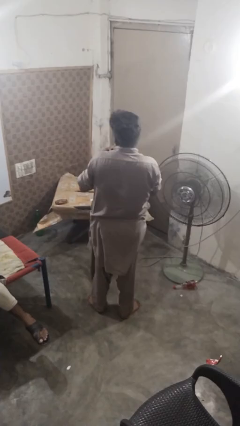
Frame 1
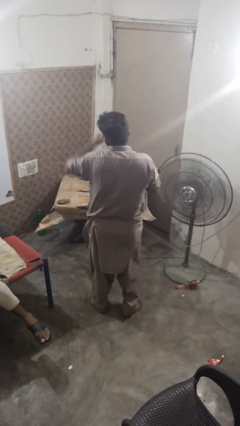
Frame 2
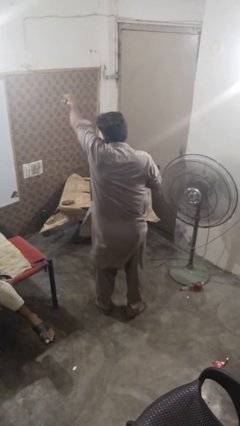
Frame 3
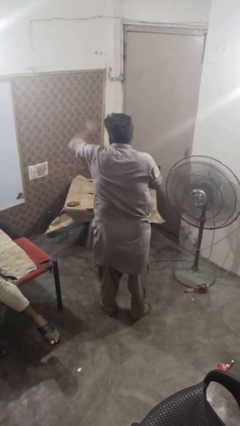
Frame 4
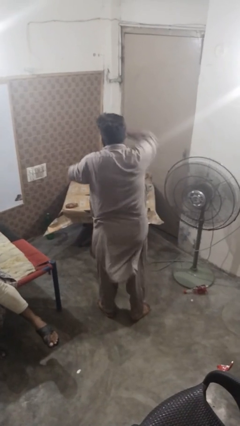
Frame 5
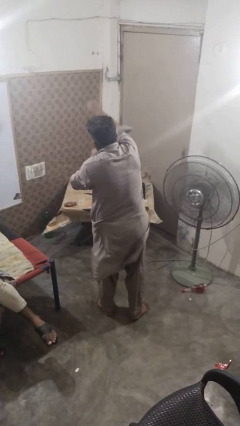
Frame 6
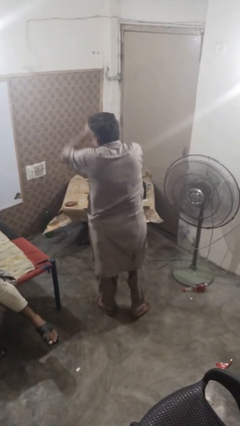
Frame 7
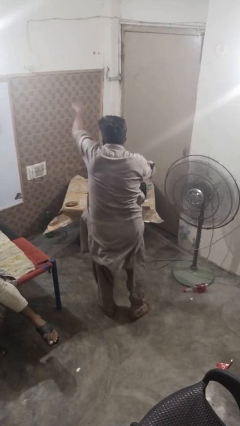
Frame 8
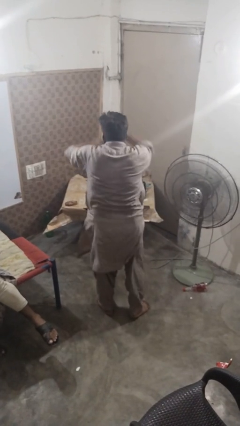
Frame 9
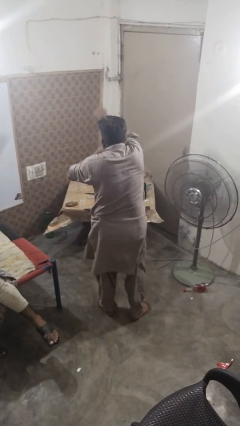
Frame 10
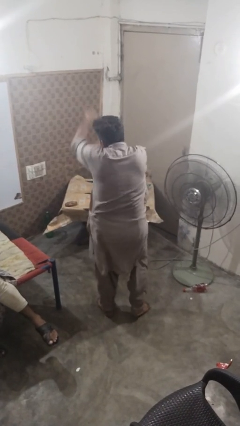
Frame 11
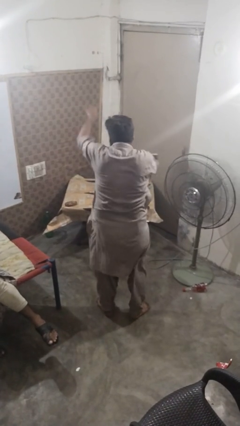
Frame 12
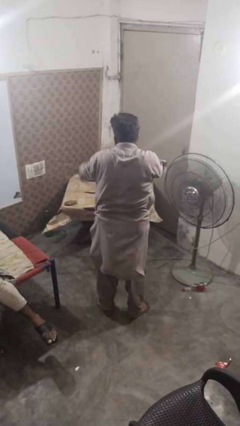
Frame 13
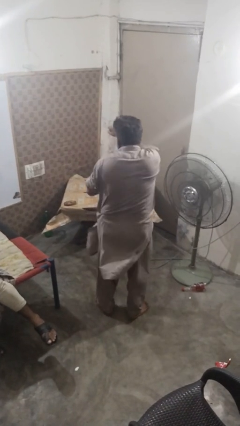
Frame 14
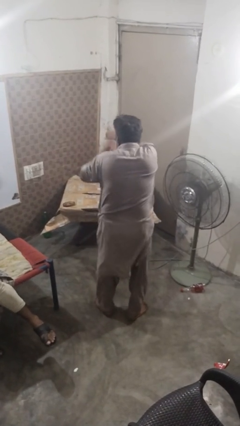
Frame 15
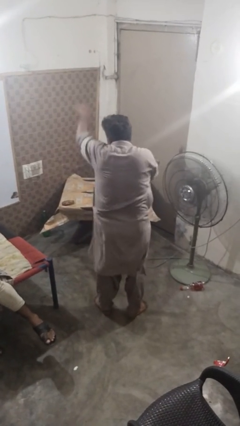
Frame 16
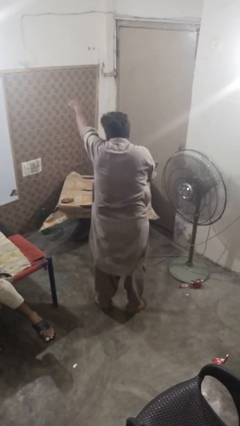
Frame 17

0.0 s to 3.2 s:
person punches

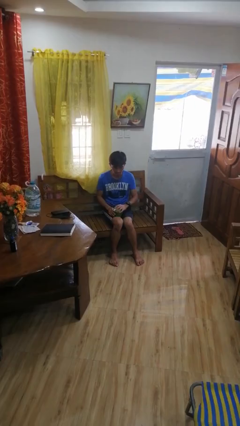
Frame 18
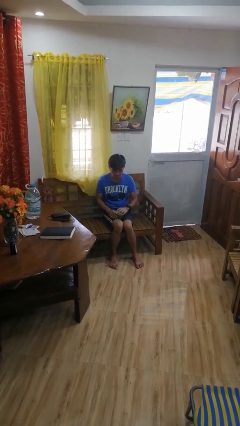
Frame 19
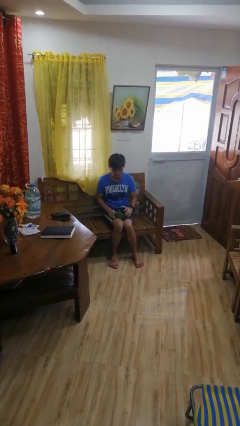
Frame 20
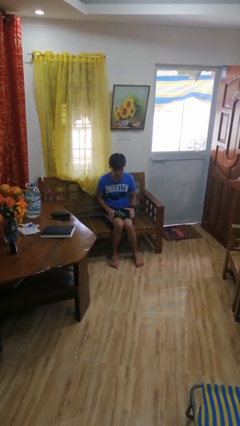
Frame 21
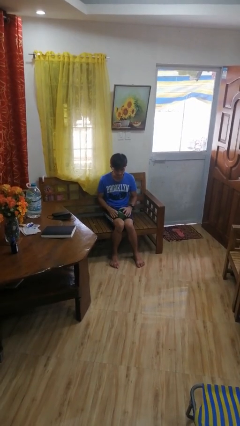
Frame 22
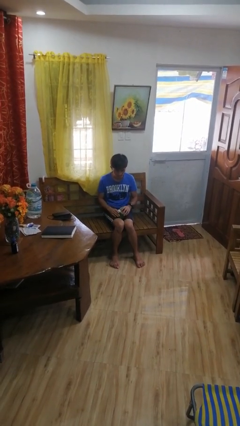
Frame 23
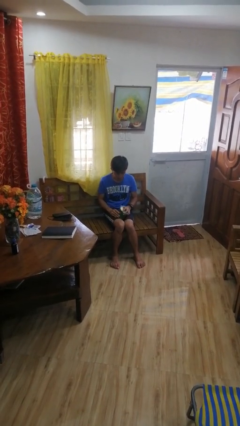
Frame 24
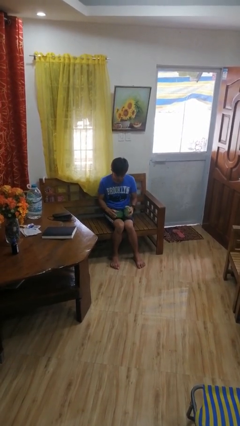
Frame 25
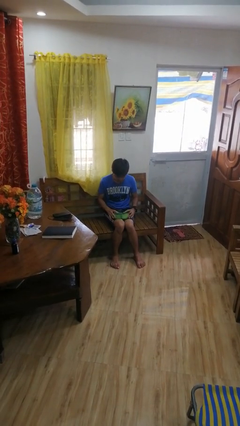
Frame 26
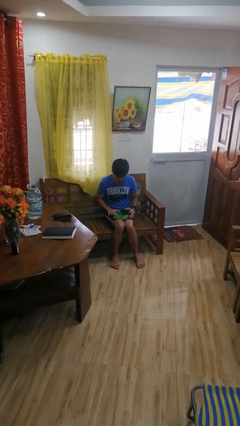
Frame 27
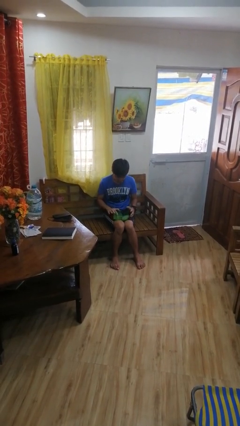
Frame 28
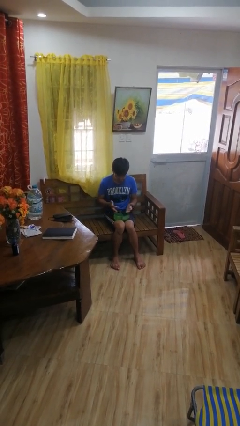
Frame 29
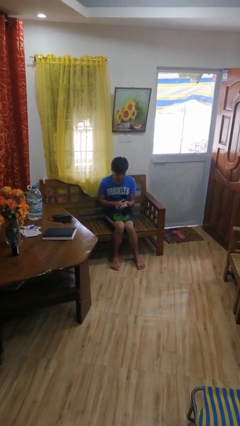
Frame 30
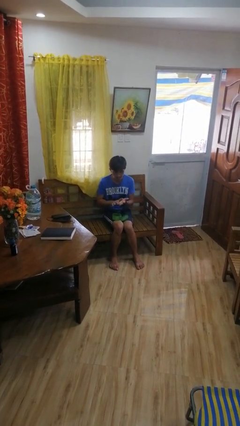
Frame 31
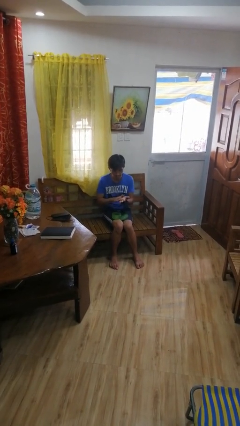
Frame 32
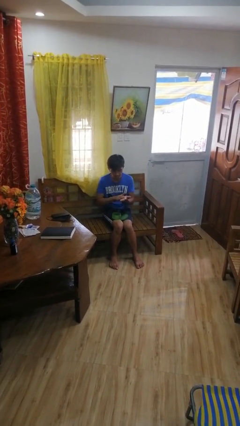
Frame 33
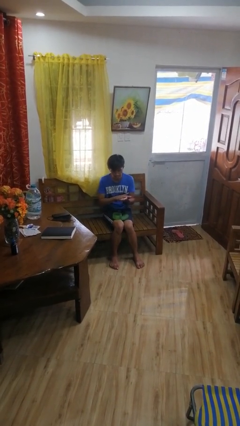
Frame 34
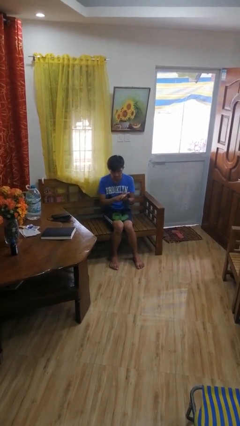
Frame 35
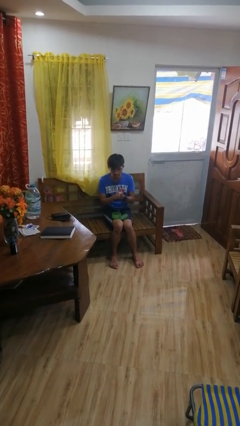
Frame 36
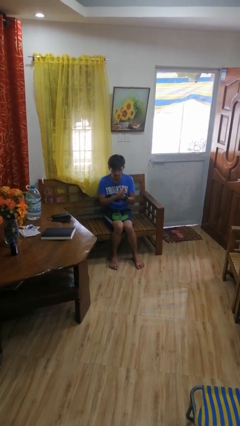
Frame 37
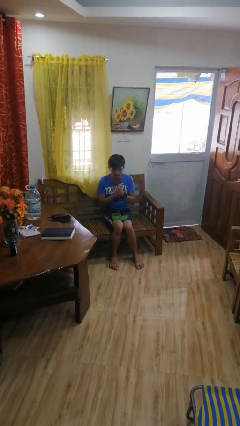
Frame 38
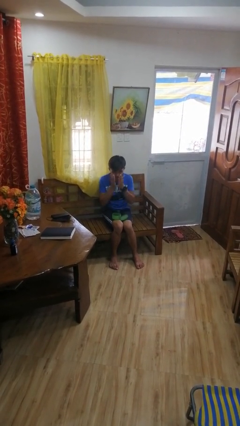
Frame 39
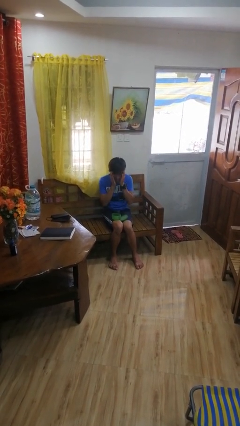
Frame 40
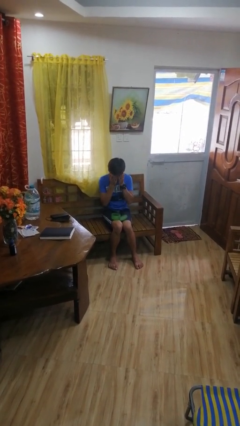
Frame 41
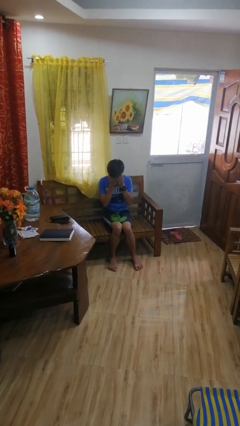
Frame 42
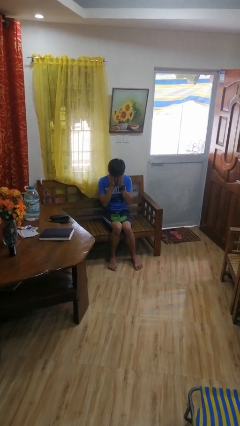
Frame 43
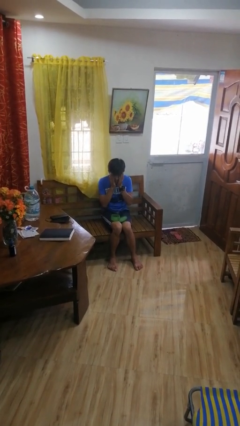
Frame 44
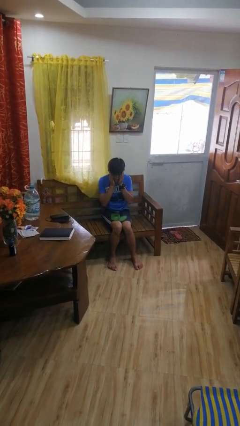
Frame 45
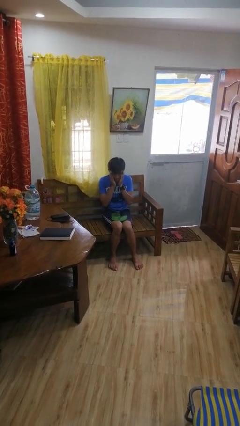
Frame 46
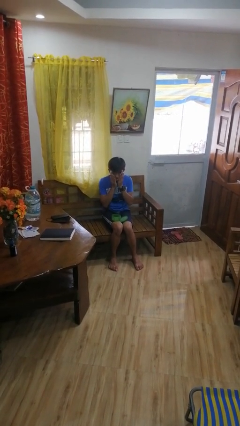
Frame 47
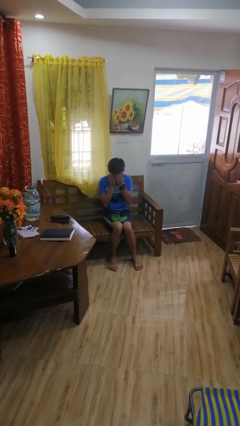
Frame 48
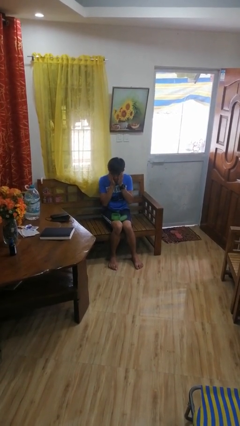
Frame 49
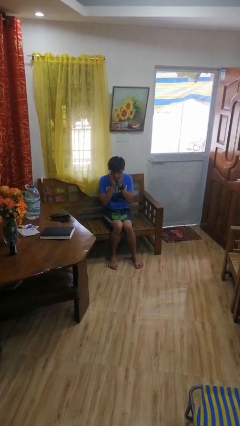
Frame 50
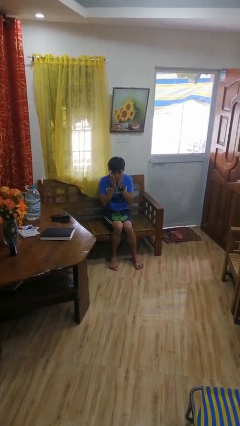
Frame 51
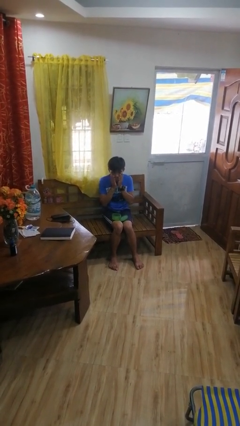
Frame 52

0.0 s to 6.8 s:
person applies facial moisturizer

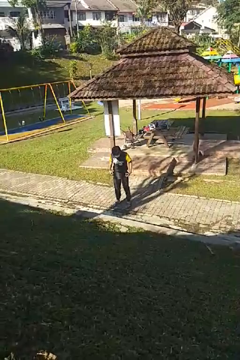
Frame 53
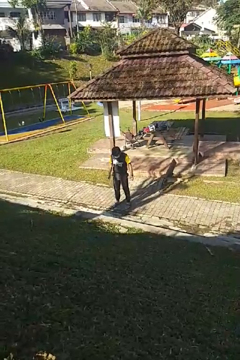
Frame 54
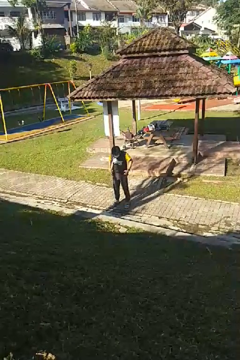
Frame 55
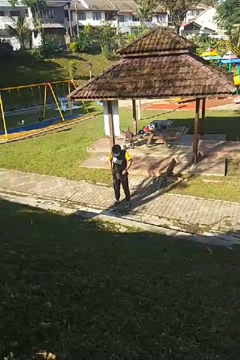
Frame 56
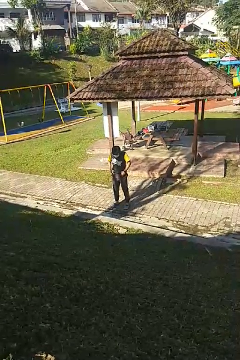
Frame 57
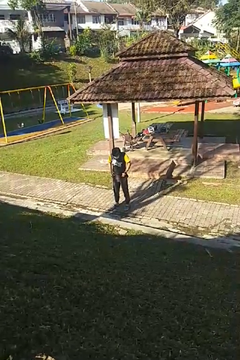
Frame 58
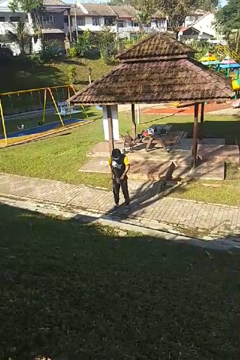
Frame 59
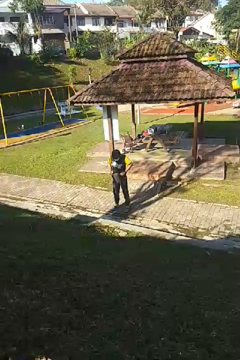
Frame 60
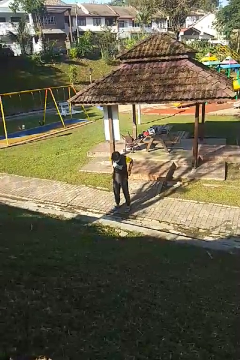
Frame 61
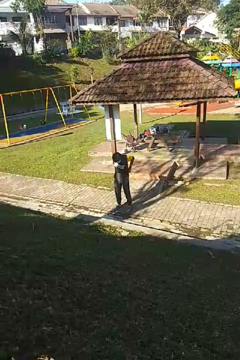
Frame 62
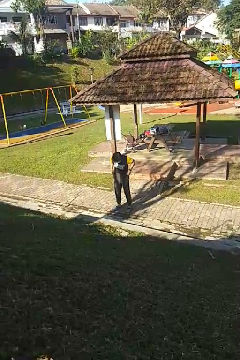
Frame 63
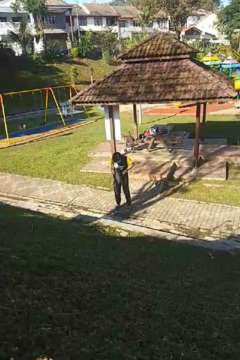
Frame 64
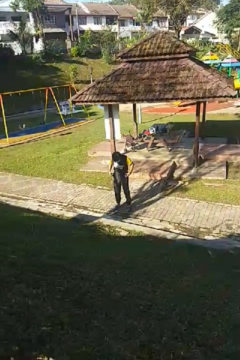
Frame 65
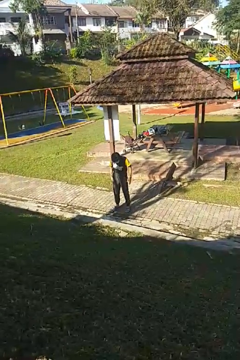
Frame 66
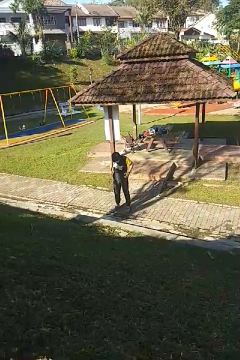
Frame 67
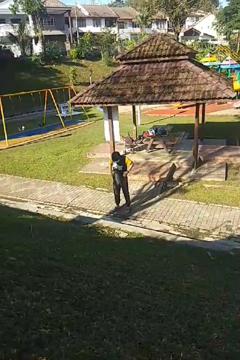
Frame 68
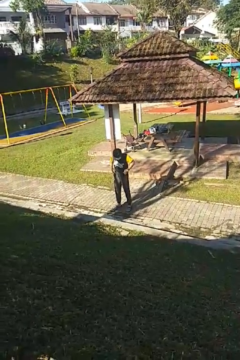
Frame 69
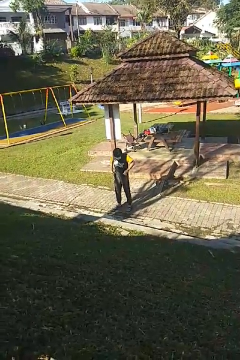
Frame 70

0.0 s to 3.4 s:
person hikes up pants

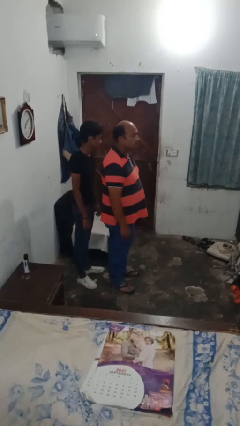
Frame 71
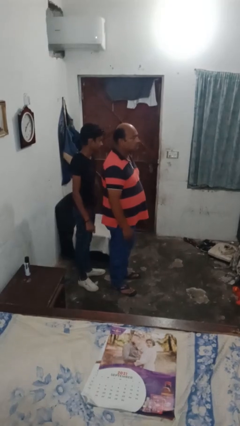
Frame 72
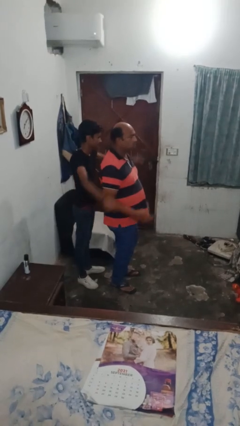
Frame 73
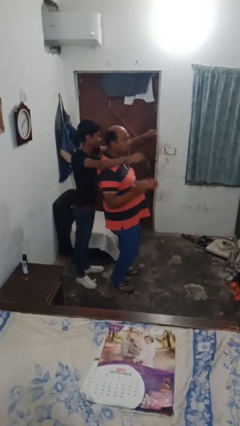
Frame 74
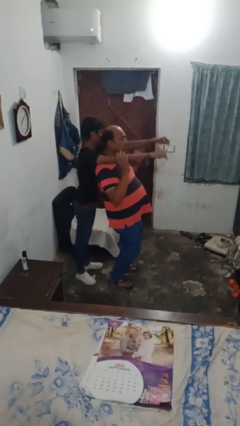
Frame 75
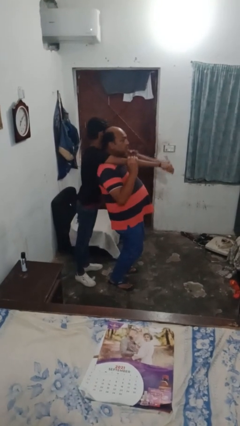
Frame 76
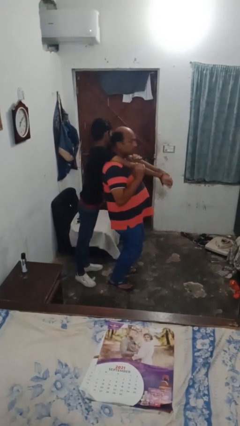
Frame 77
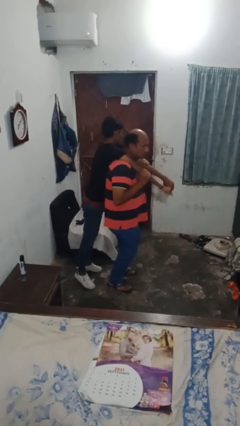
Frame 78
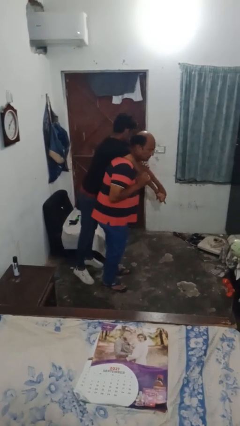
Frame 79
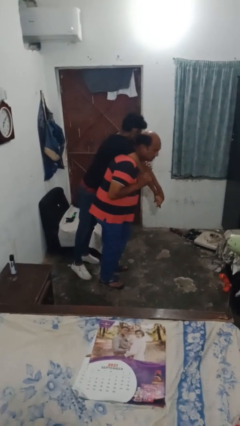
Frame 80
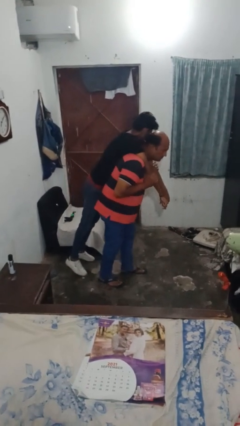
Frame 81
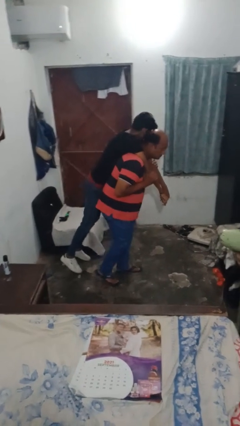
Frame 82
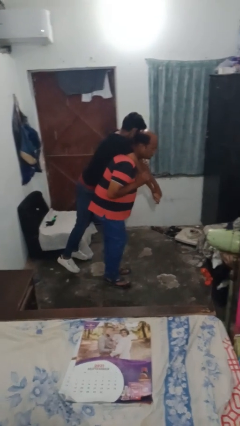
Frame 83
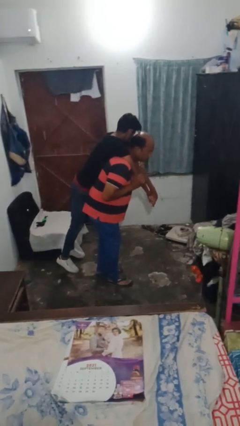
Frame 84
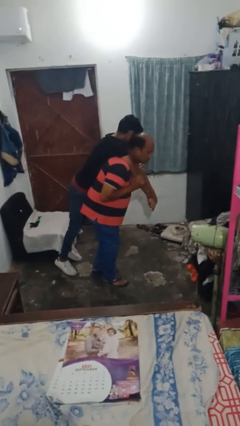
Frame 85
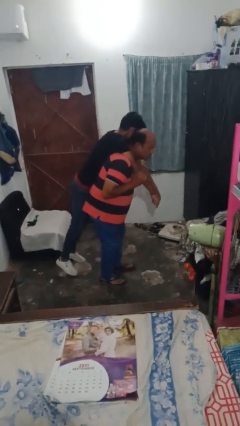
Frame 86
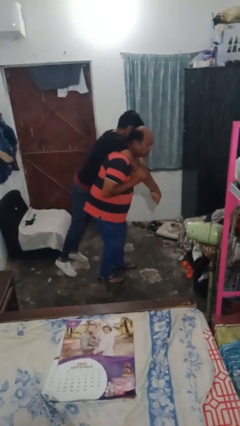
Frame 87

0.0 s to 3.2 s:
person carries person on back

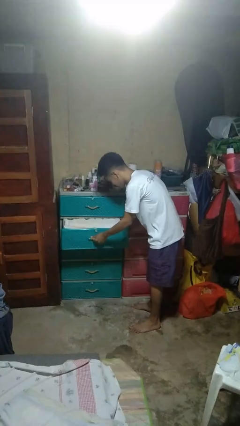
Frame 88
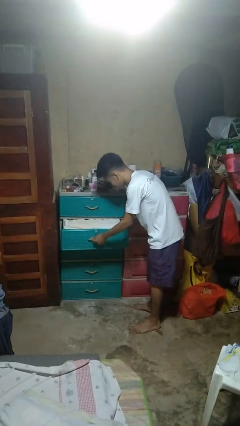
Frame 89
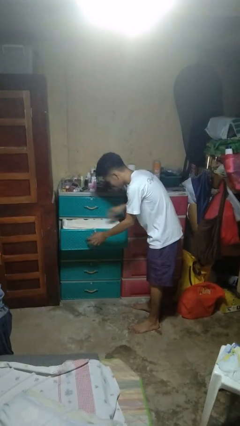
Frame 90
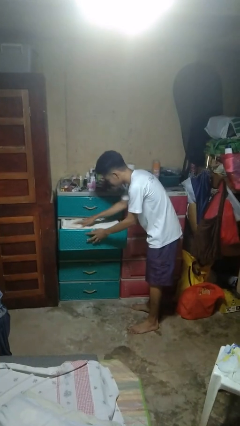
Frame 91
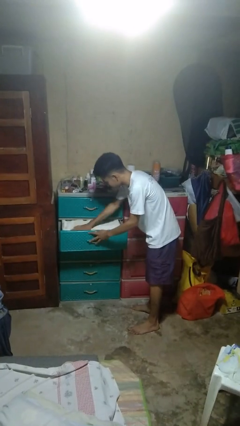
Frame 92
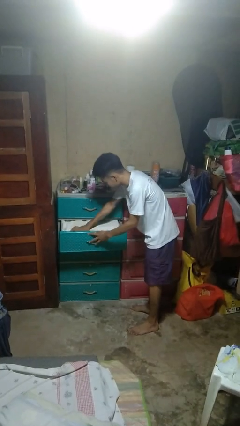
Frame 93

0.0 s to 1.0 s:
person opens dresser drawer

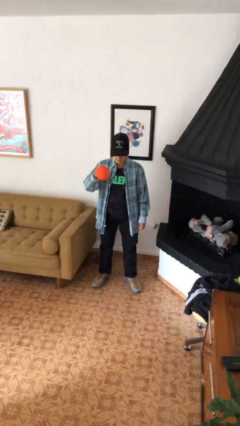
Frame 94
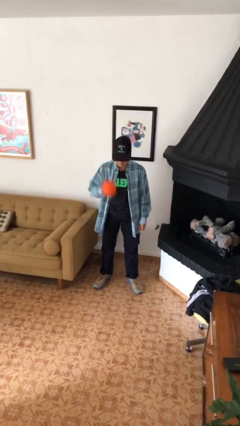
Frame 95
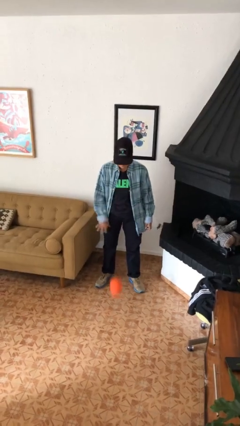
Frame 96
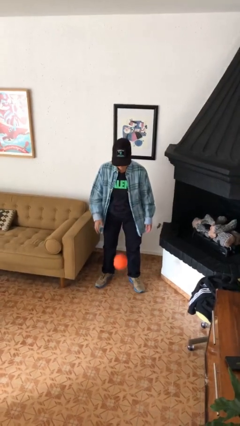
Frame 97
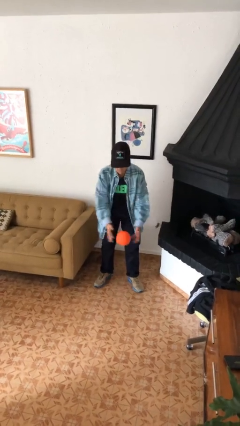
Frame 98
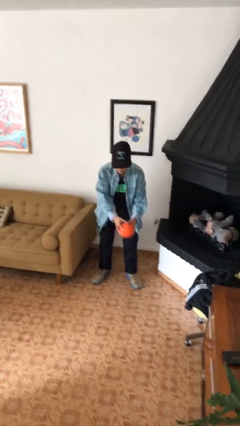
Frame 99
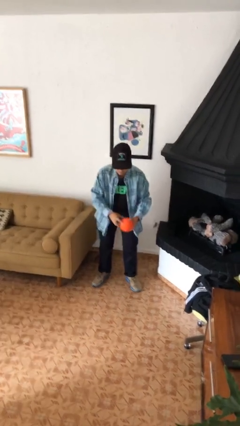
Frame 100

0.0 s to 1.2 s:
person bounces ball on floor
